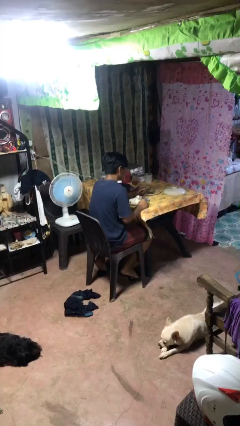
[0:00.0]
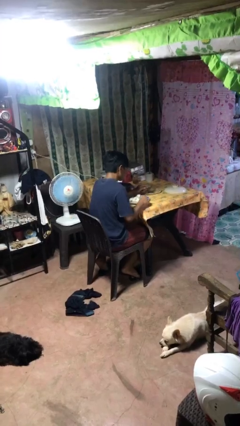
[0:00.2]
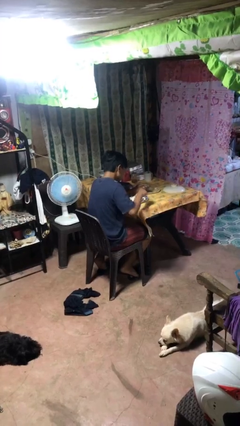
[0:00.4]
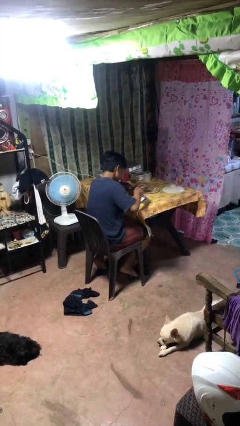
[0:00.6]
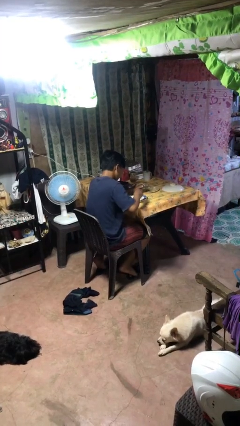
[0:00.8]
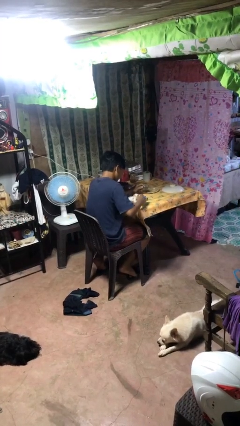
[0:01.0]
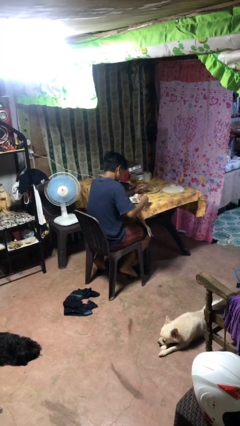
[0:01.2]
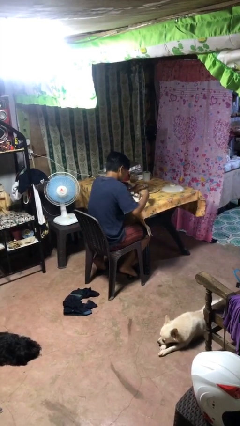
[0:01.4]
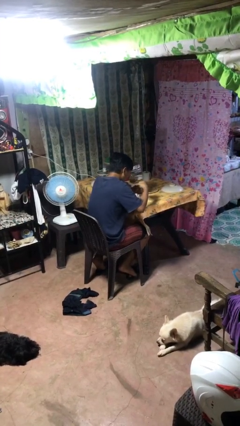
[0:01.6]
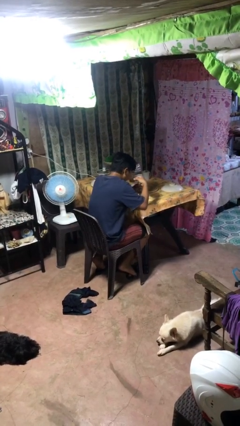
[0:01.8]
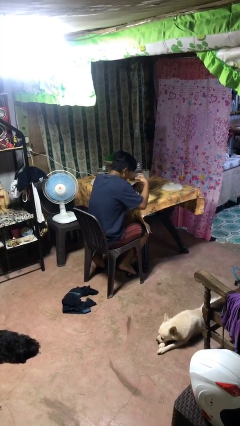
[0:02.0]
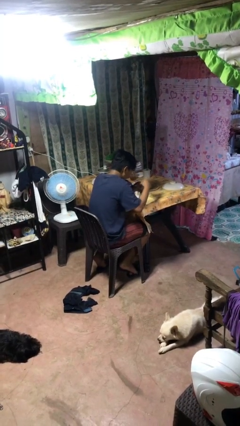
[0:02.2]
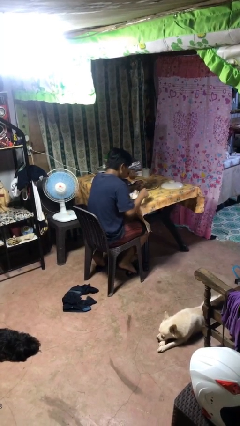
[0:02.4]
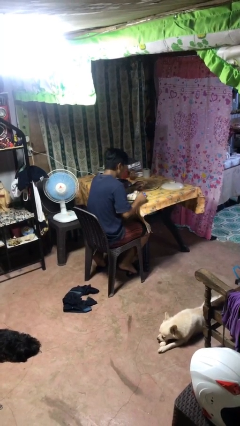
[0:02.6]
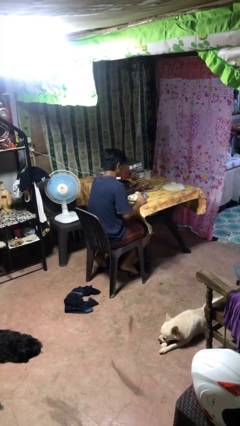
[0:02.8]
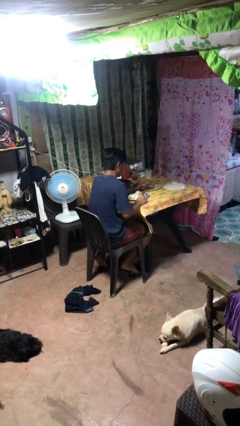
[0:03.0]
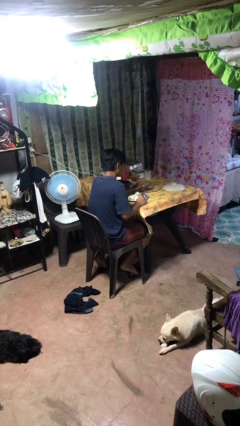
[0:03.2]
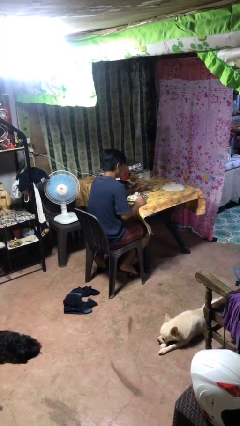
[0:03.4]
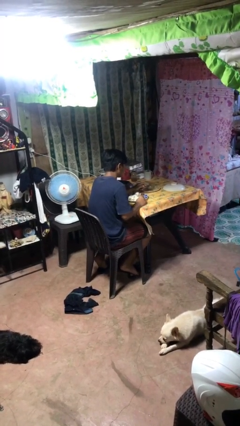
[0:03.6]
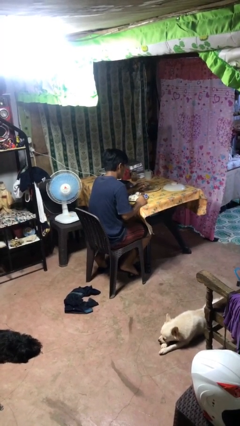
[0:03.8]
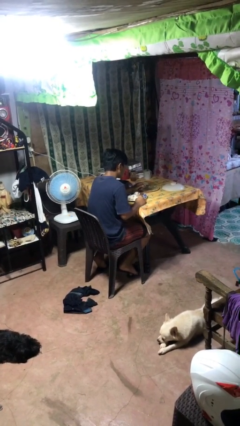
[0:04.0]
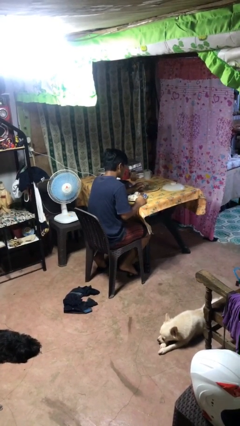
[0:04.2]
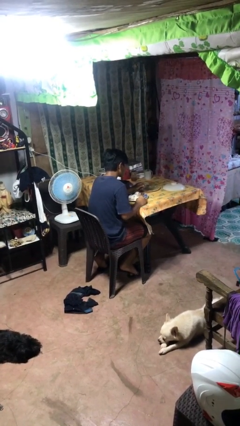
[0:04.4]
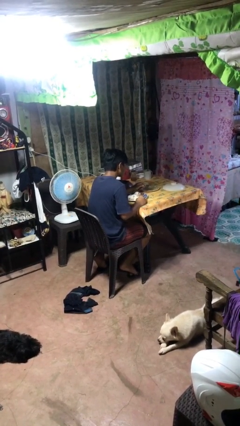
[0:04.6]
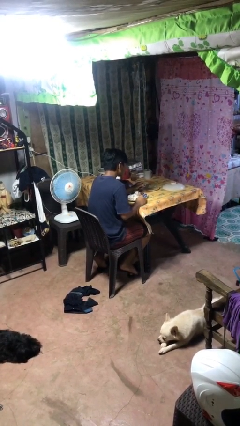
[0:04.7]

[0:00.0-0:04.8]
person eats with utensil

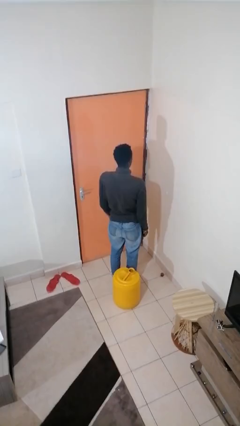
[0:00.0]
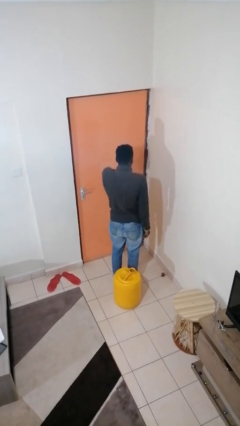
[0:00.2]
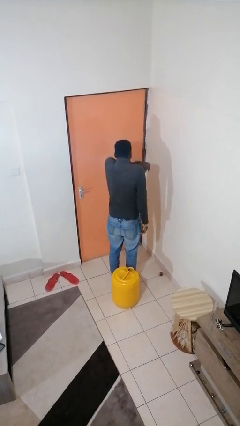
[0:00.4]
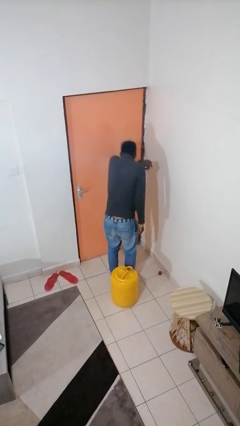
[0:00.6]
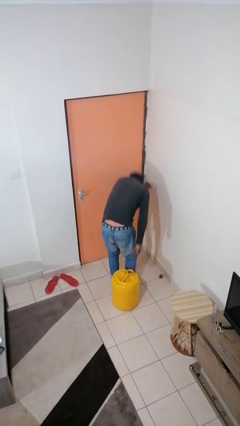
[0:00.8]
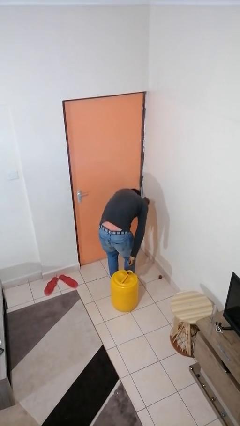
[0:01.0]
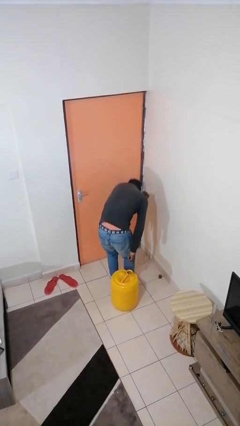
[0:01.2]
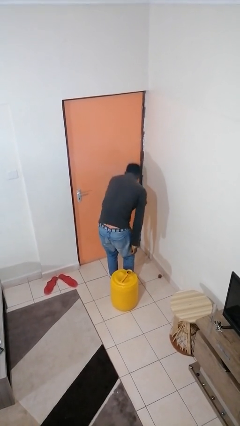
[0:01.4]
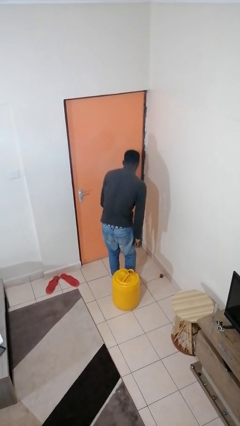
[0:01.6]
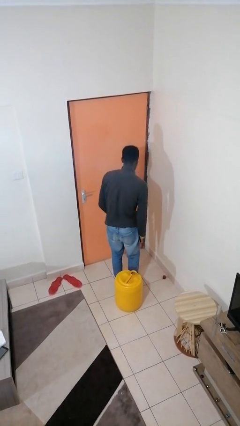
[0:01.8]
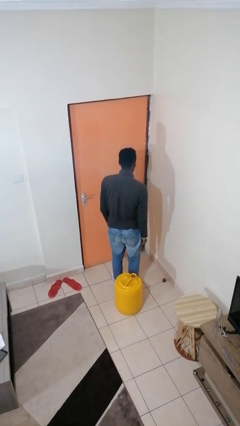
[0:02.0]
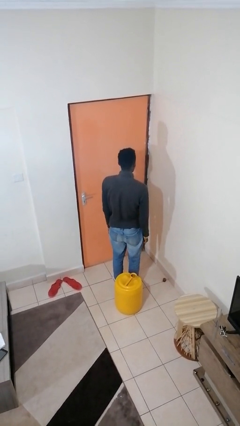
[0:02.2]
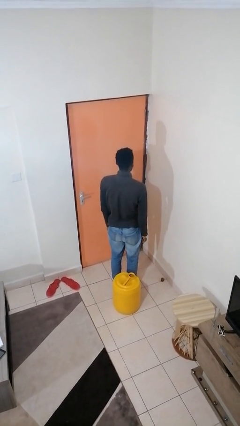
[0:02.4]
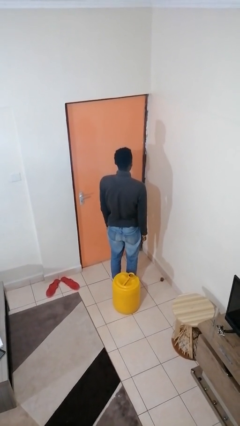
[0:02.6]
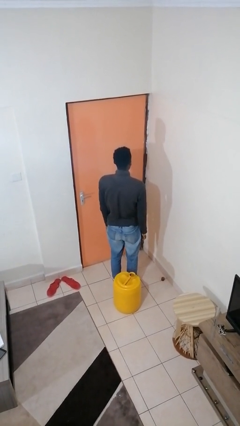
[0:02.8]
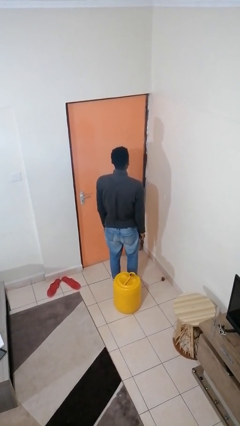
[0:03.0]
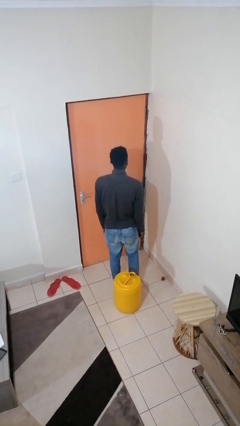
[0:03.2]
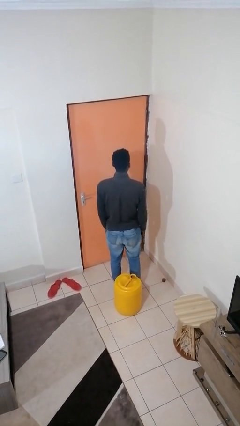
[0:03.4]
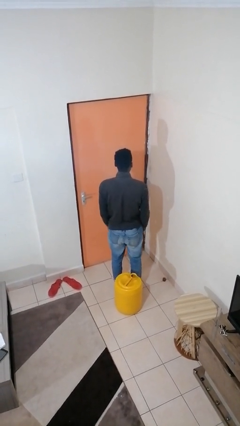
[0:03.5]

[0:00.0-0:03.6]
person sneezes into arm

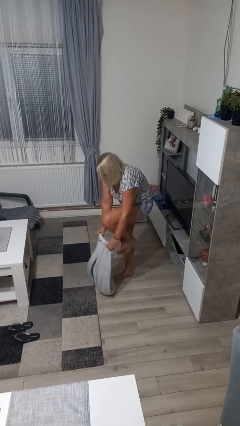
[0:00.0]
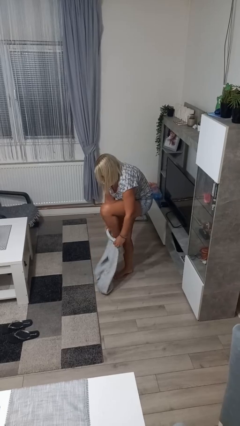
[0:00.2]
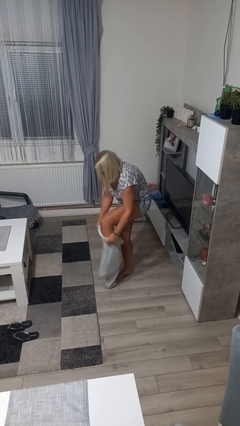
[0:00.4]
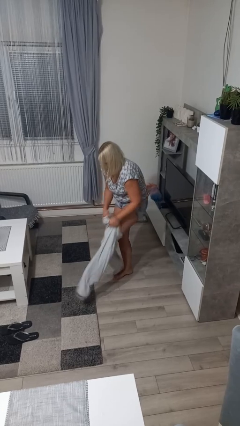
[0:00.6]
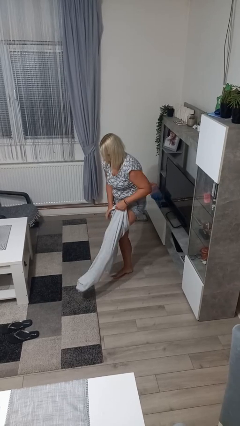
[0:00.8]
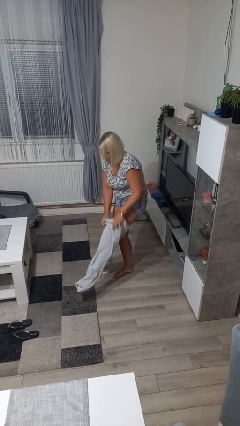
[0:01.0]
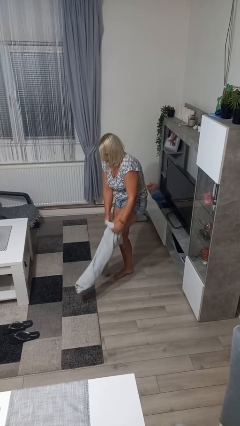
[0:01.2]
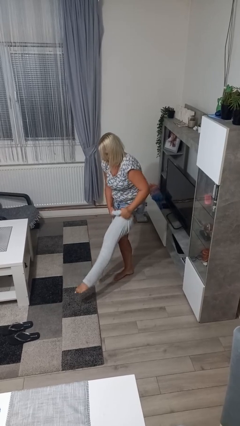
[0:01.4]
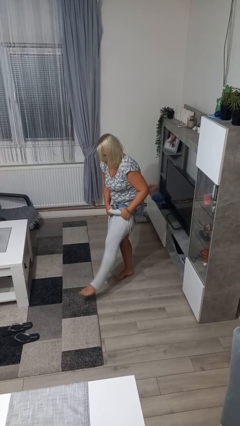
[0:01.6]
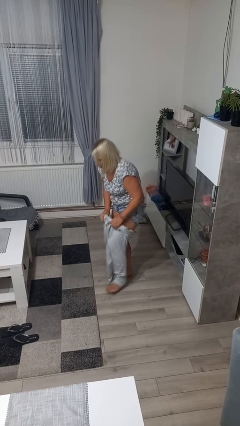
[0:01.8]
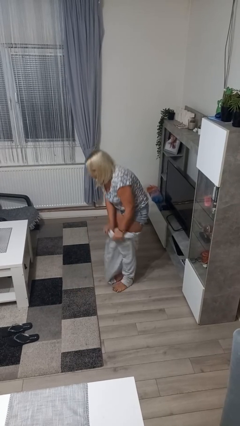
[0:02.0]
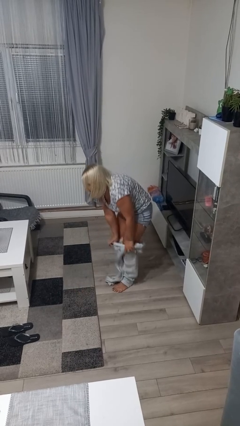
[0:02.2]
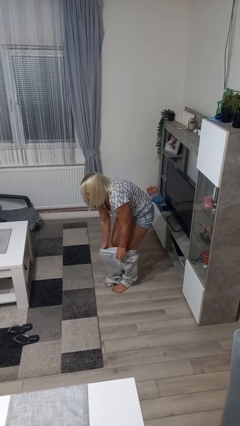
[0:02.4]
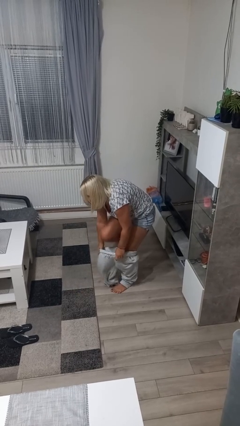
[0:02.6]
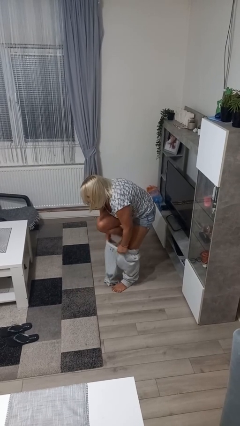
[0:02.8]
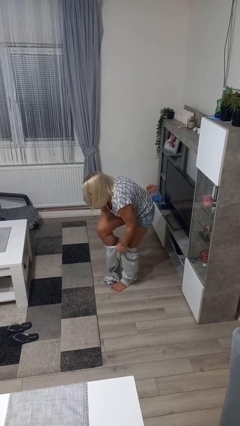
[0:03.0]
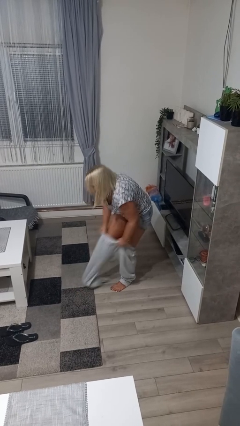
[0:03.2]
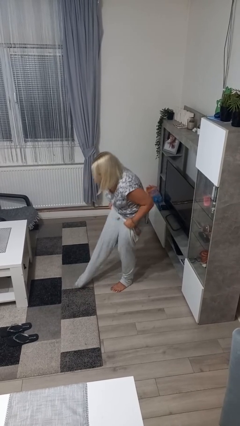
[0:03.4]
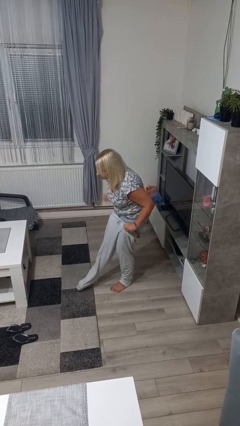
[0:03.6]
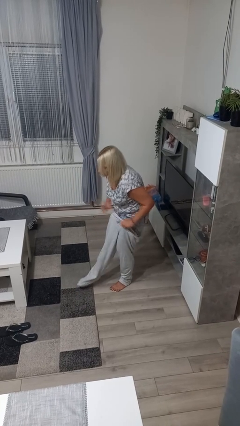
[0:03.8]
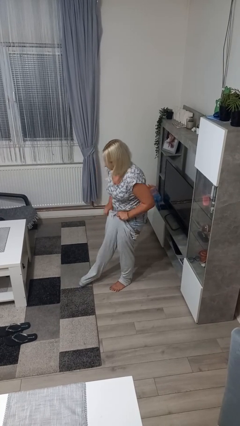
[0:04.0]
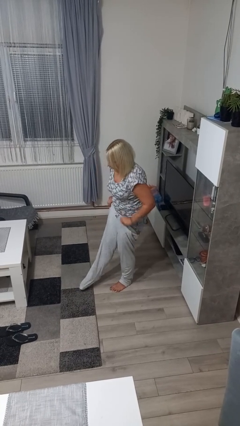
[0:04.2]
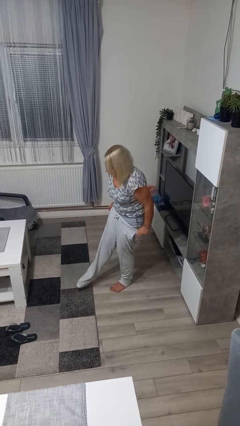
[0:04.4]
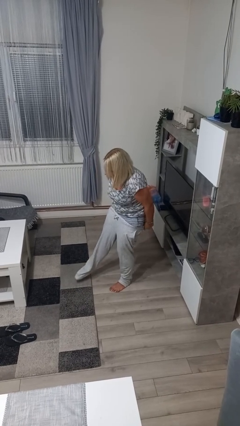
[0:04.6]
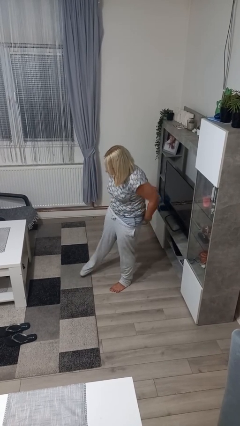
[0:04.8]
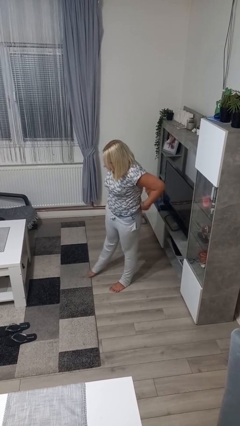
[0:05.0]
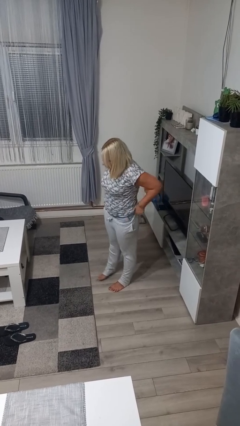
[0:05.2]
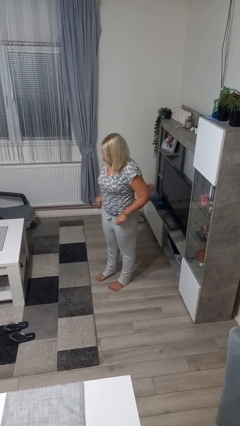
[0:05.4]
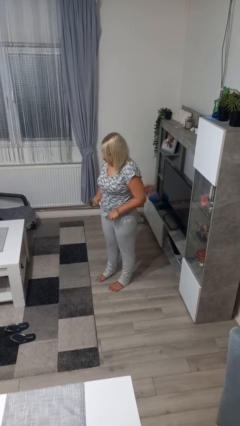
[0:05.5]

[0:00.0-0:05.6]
person puts on pants

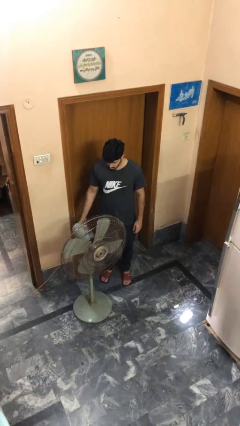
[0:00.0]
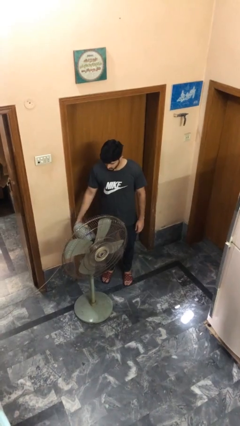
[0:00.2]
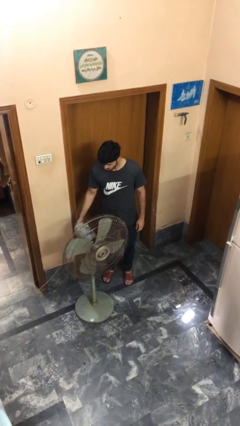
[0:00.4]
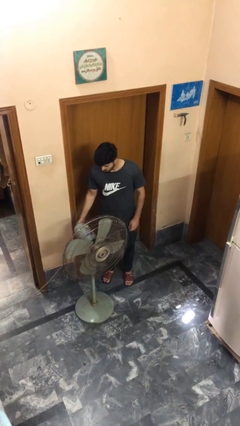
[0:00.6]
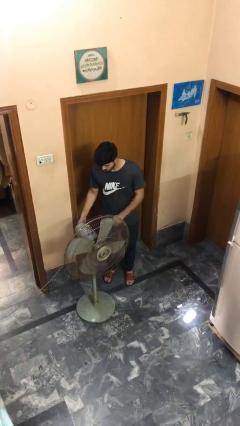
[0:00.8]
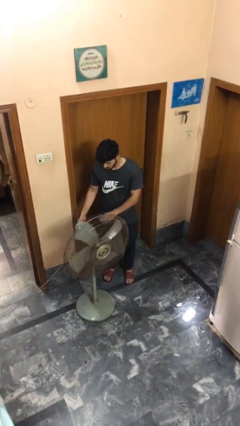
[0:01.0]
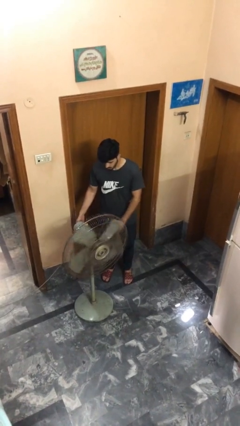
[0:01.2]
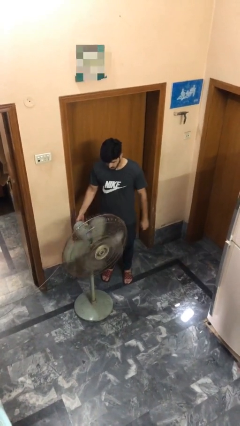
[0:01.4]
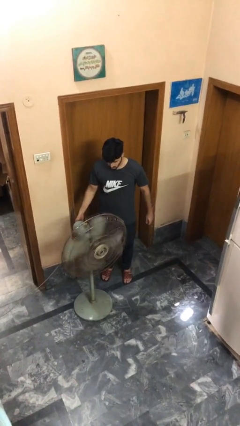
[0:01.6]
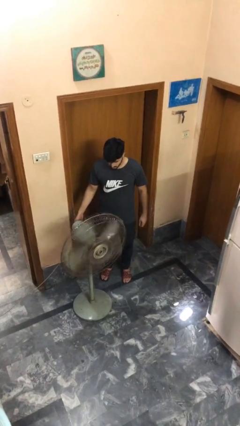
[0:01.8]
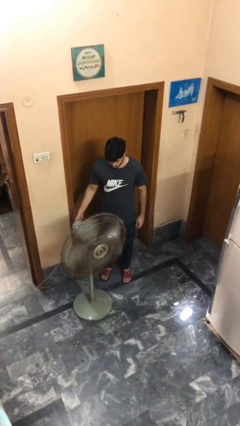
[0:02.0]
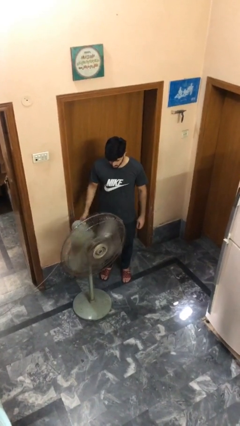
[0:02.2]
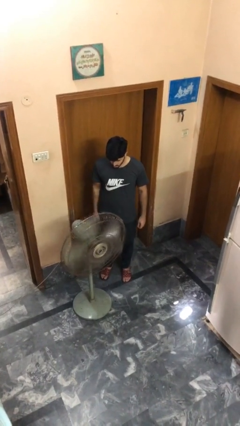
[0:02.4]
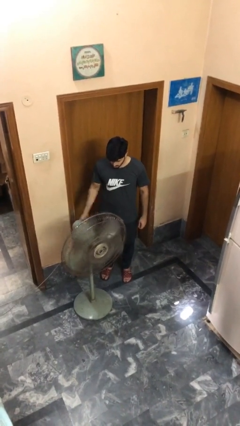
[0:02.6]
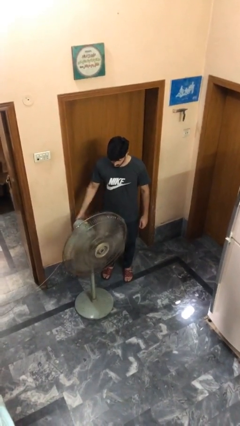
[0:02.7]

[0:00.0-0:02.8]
person turns on fan

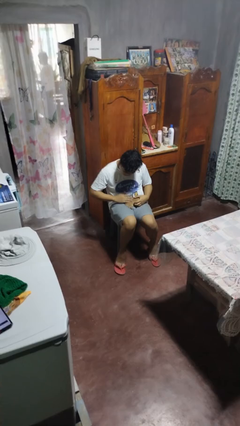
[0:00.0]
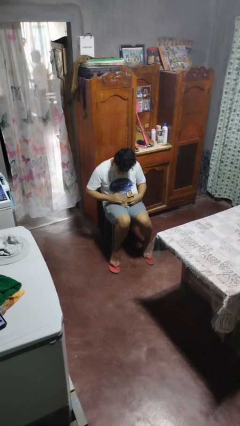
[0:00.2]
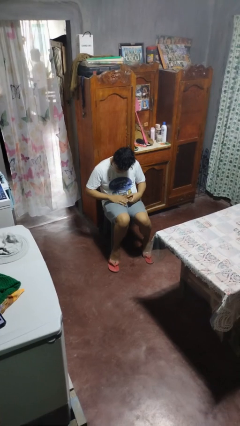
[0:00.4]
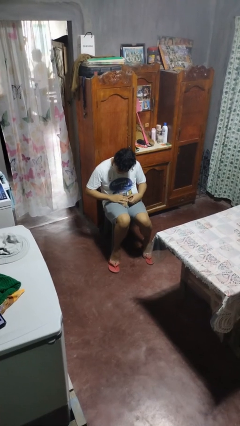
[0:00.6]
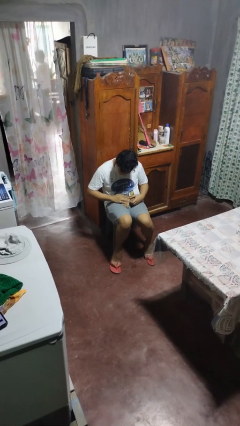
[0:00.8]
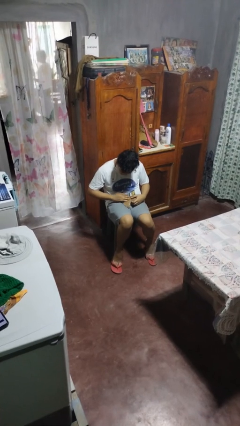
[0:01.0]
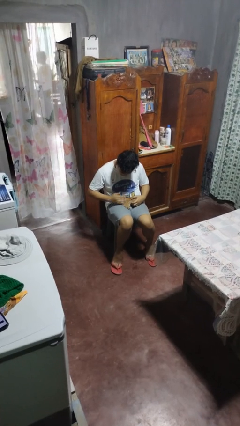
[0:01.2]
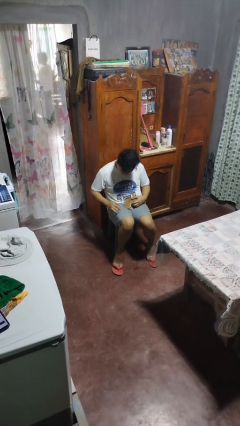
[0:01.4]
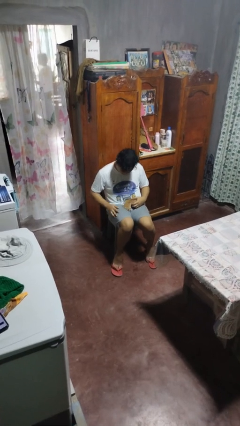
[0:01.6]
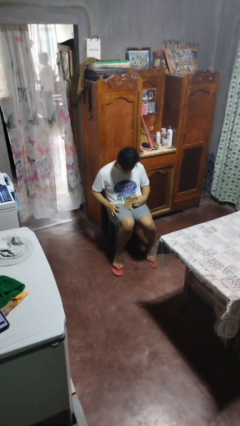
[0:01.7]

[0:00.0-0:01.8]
person pets cat
